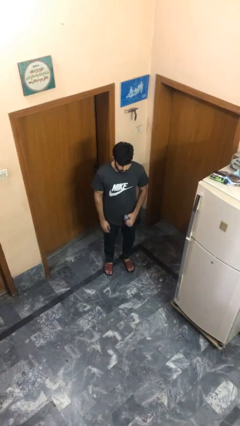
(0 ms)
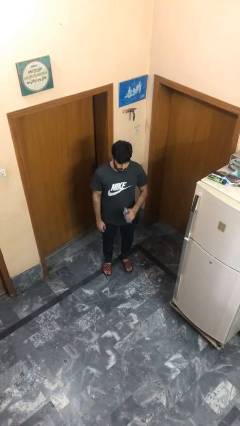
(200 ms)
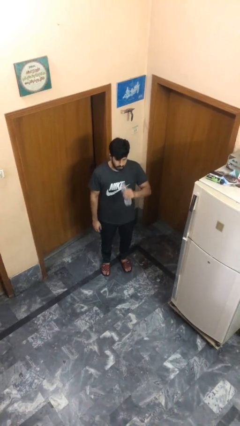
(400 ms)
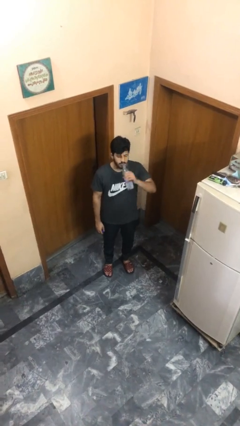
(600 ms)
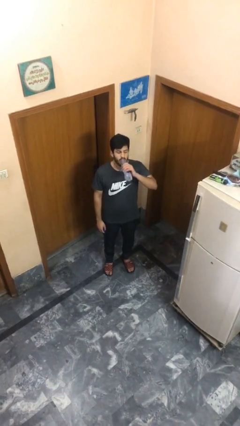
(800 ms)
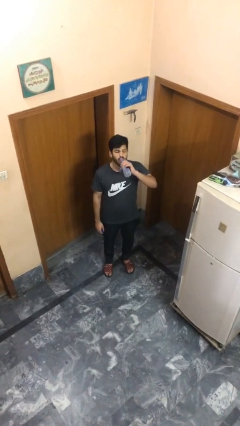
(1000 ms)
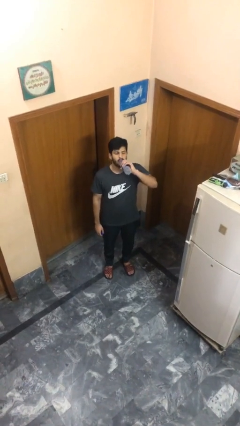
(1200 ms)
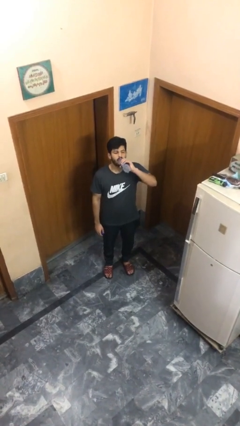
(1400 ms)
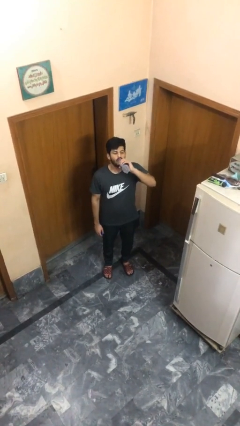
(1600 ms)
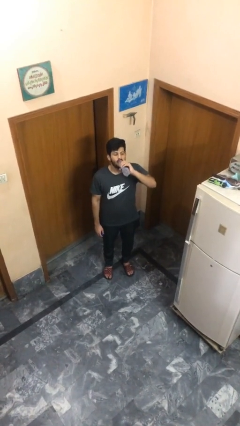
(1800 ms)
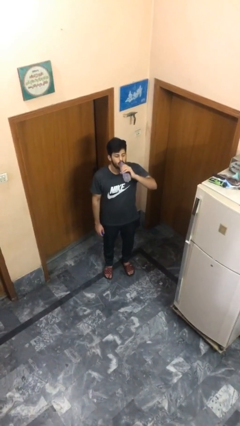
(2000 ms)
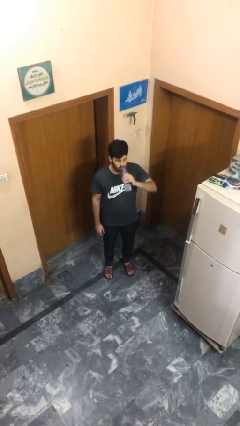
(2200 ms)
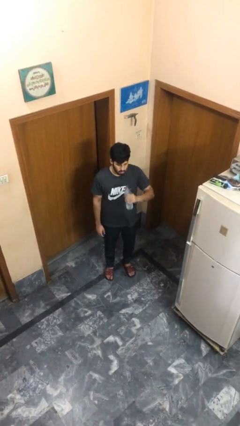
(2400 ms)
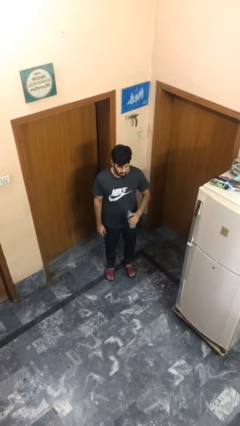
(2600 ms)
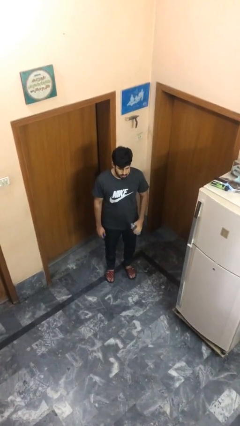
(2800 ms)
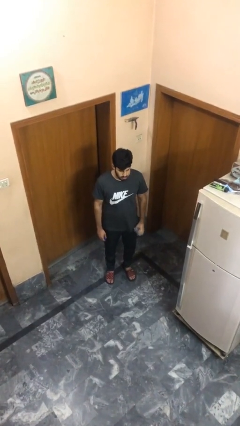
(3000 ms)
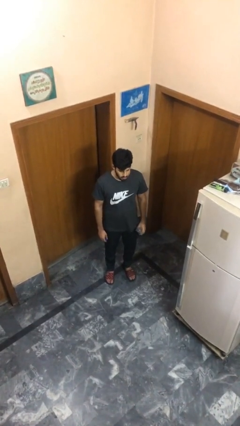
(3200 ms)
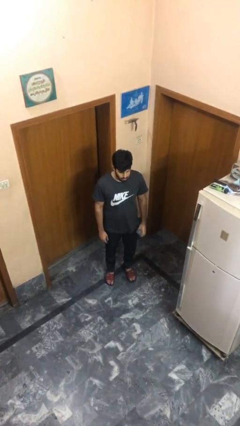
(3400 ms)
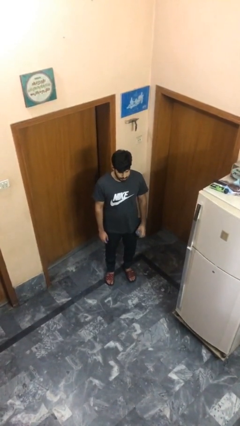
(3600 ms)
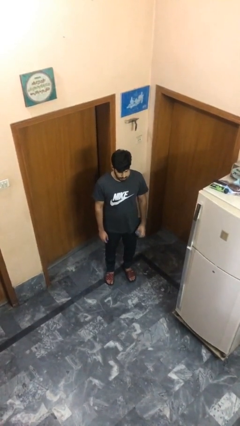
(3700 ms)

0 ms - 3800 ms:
person drinks from bottle

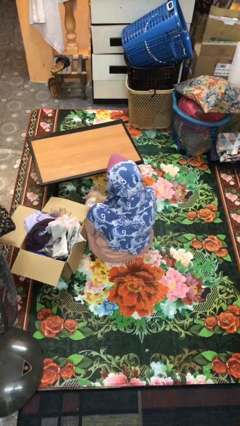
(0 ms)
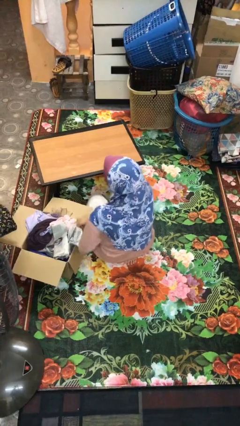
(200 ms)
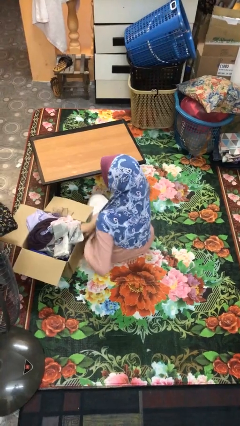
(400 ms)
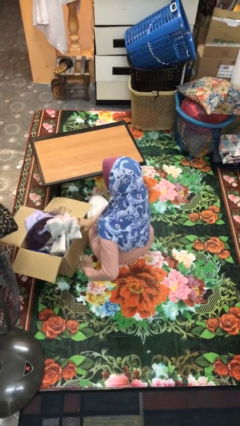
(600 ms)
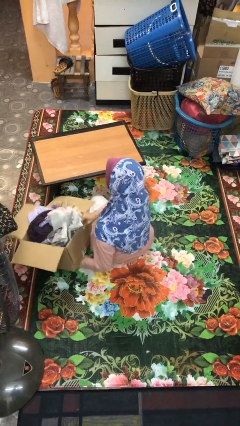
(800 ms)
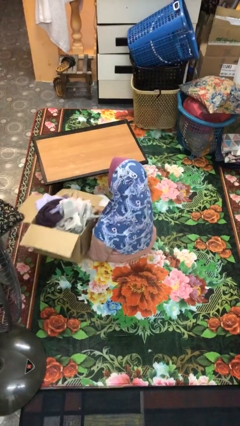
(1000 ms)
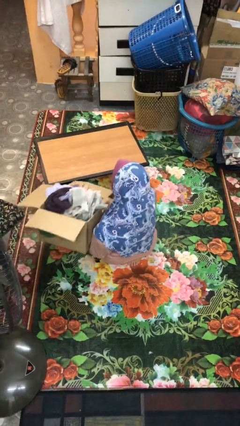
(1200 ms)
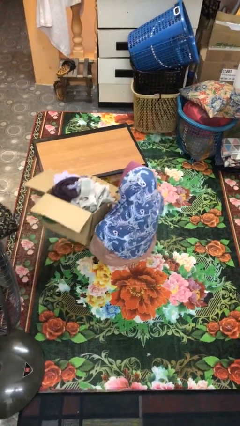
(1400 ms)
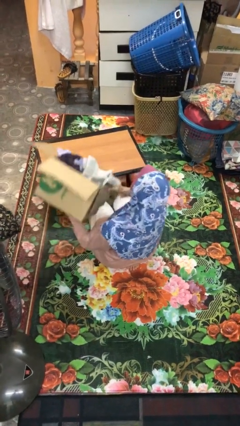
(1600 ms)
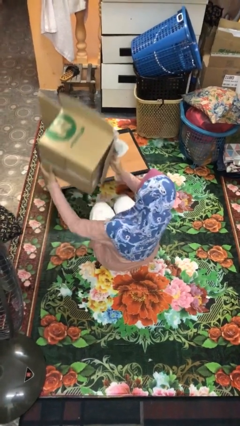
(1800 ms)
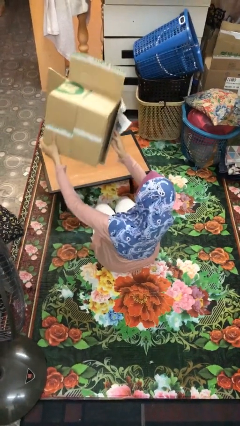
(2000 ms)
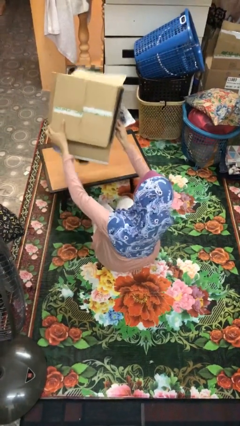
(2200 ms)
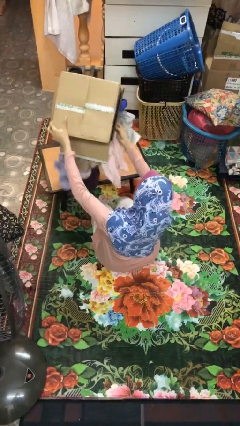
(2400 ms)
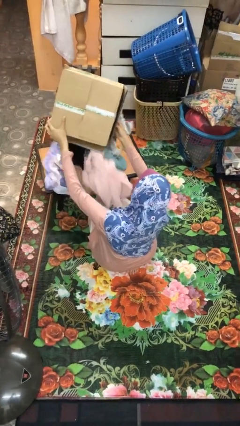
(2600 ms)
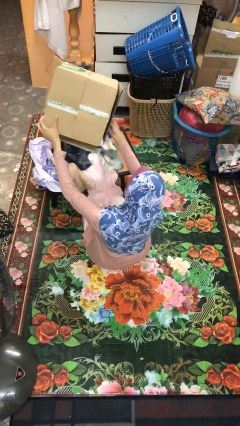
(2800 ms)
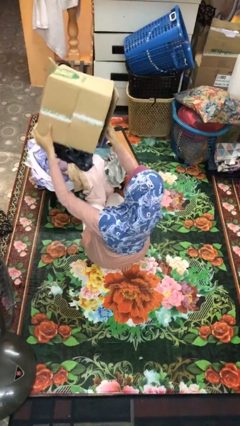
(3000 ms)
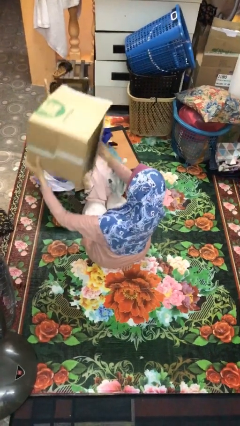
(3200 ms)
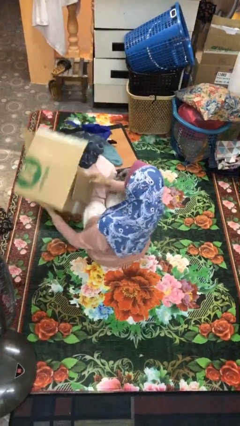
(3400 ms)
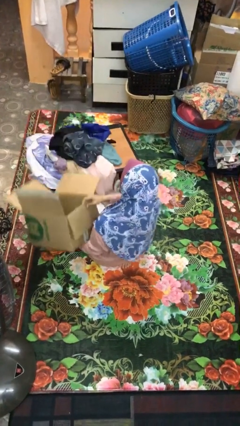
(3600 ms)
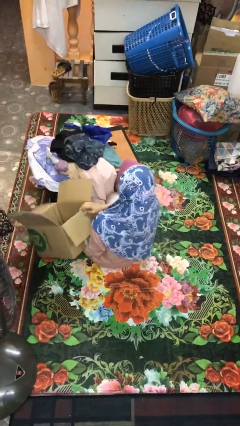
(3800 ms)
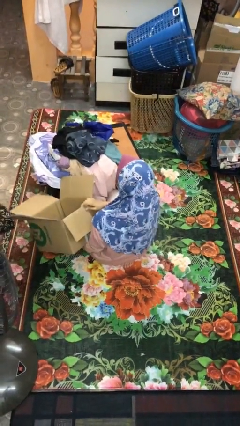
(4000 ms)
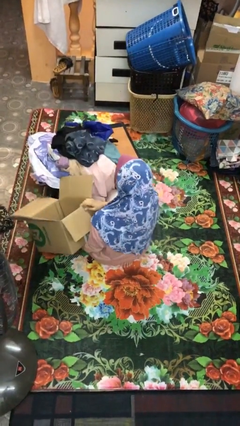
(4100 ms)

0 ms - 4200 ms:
person unloads box onto table

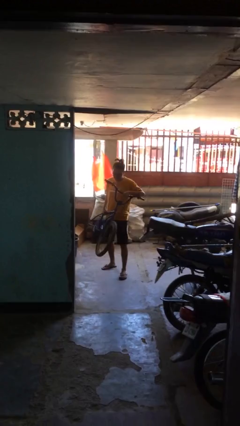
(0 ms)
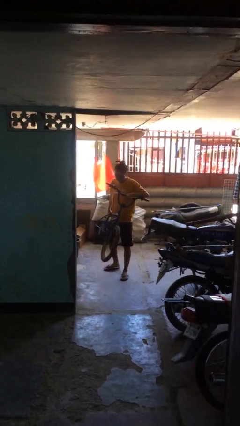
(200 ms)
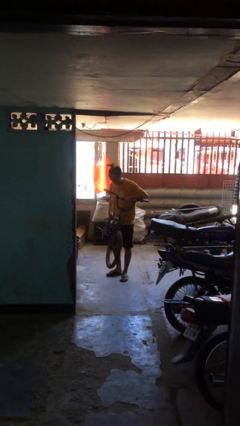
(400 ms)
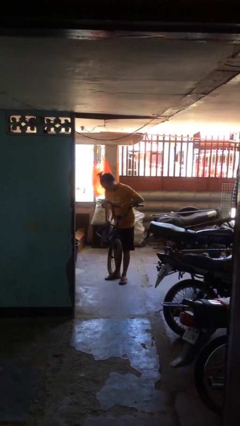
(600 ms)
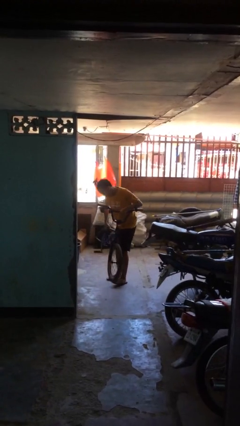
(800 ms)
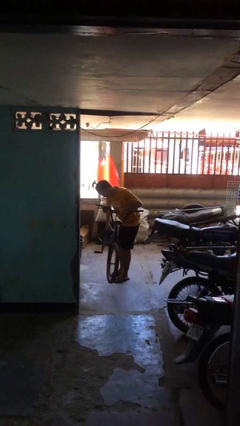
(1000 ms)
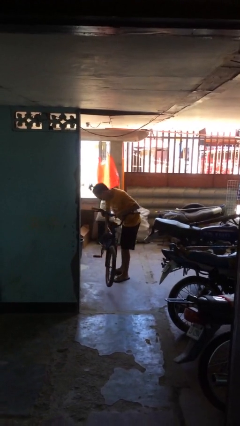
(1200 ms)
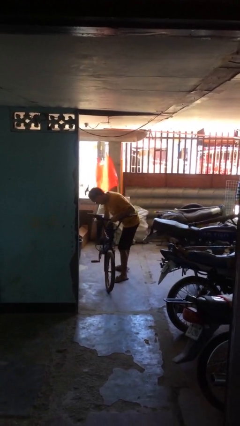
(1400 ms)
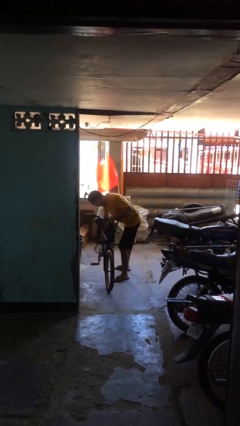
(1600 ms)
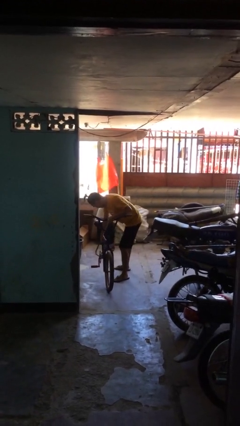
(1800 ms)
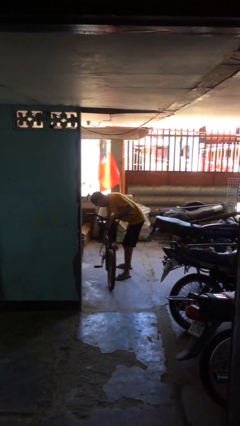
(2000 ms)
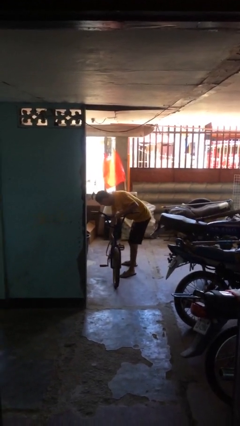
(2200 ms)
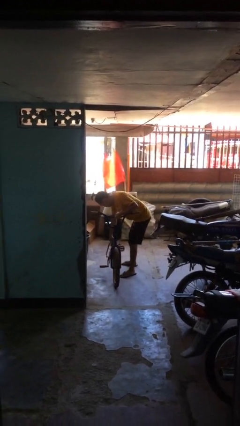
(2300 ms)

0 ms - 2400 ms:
person puts down object on floor

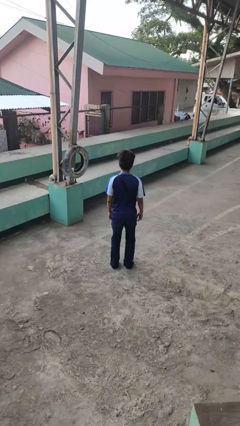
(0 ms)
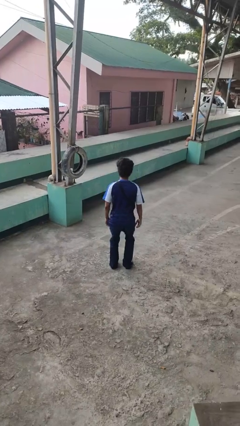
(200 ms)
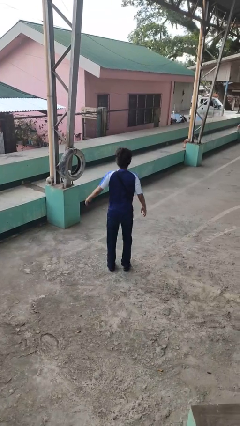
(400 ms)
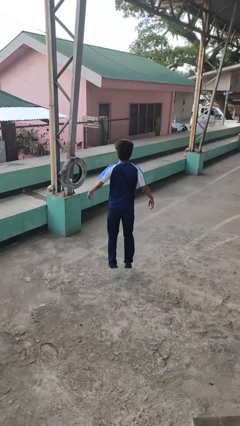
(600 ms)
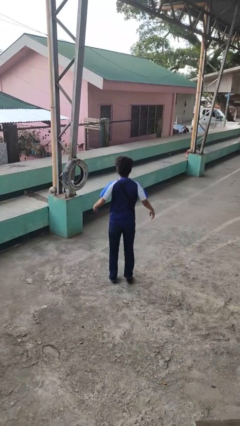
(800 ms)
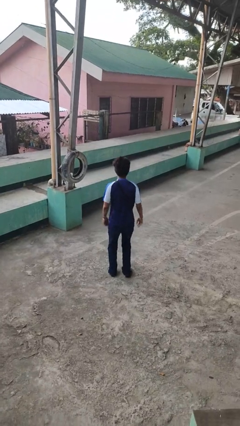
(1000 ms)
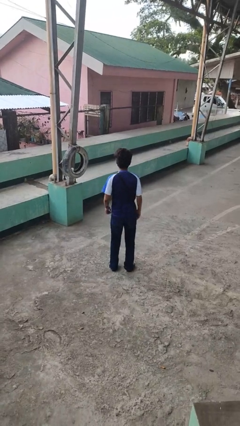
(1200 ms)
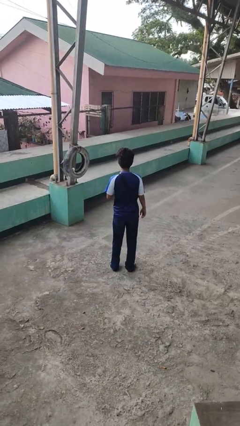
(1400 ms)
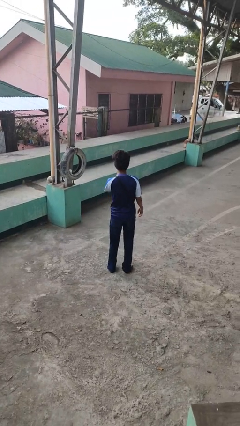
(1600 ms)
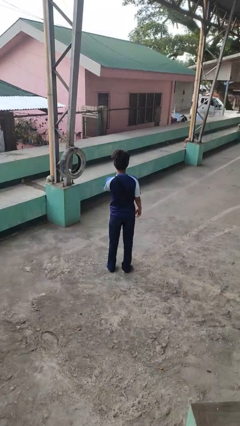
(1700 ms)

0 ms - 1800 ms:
person jumps

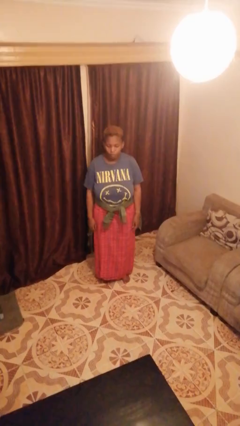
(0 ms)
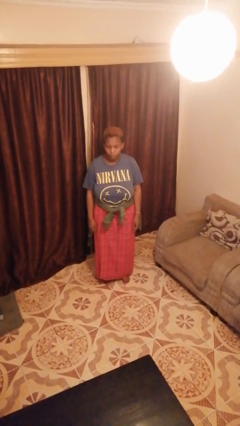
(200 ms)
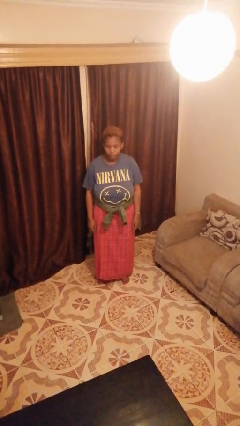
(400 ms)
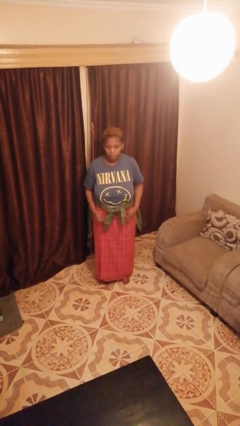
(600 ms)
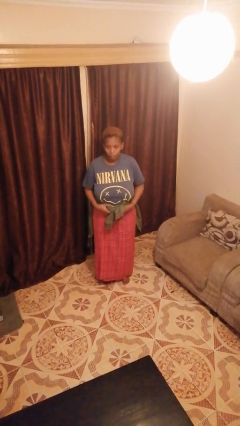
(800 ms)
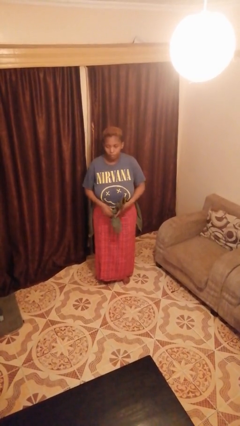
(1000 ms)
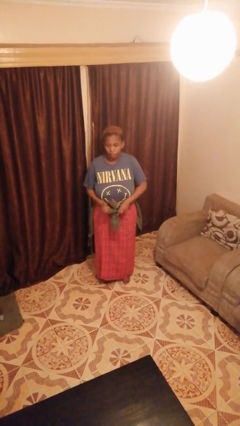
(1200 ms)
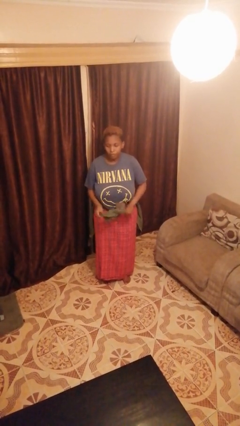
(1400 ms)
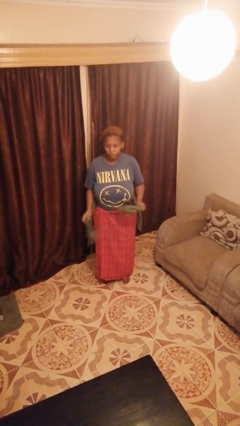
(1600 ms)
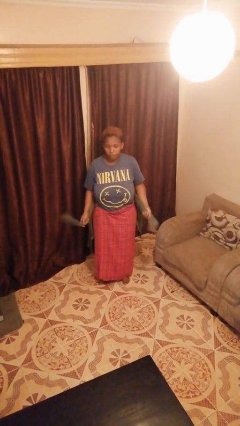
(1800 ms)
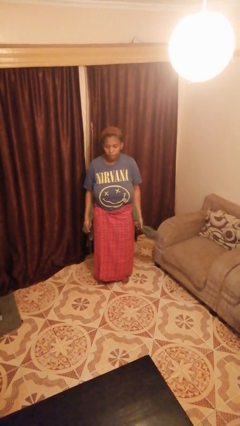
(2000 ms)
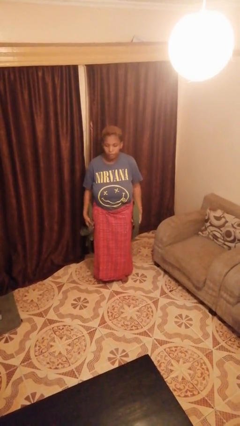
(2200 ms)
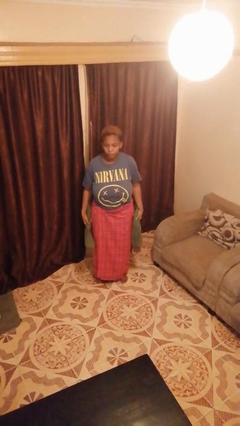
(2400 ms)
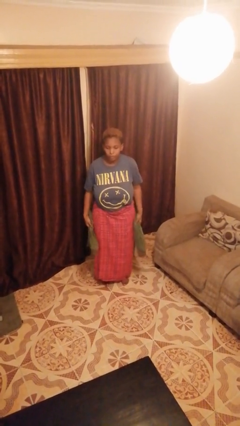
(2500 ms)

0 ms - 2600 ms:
person unties jacket around waist

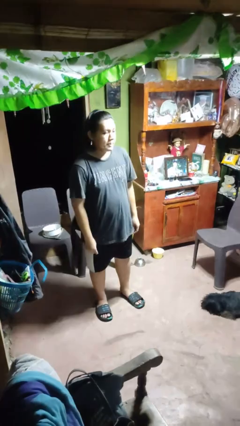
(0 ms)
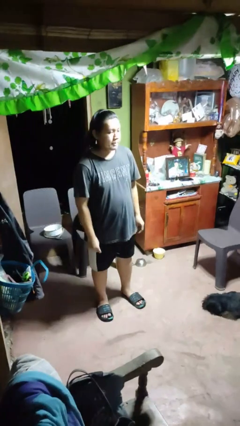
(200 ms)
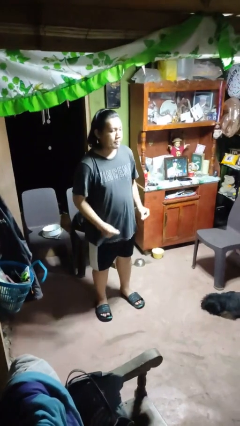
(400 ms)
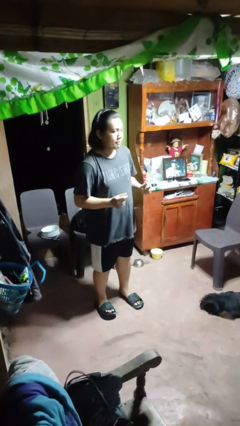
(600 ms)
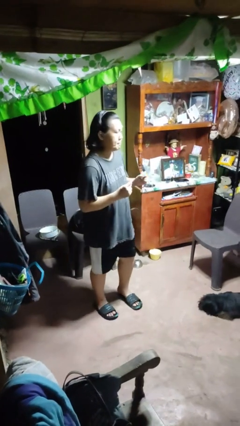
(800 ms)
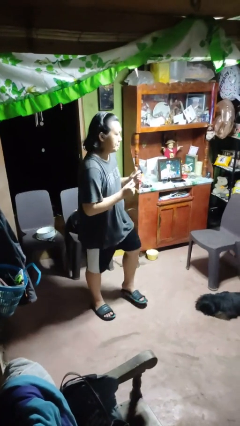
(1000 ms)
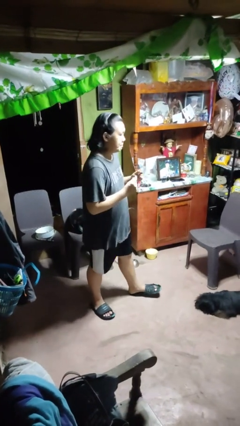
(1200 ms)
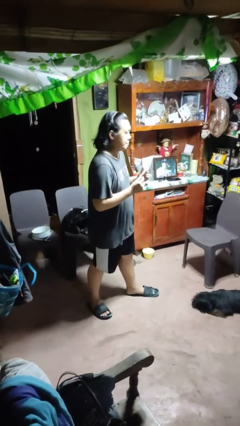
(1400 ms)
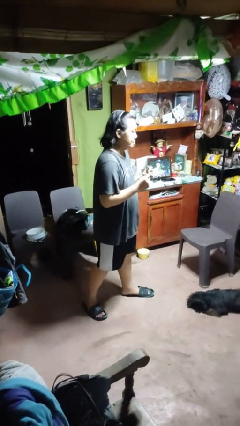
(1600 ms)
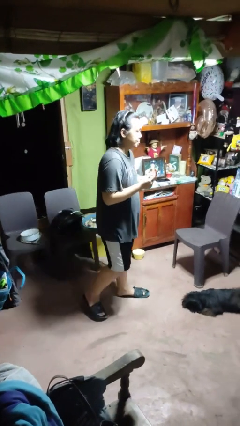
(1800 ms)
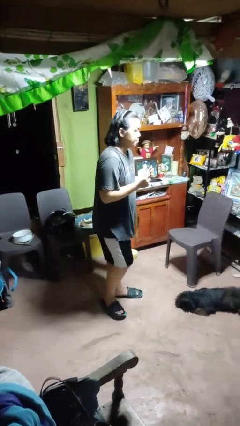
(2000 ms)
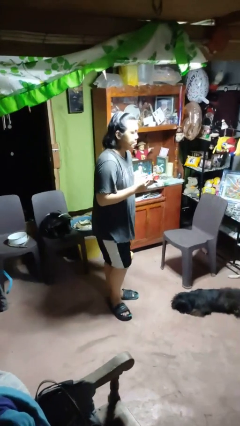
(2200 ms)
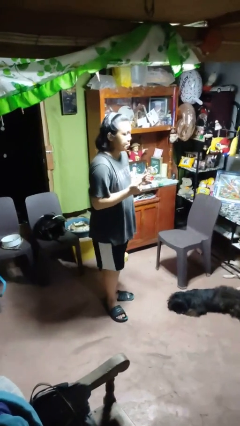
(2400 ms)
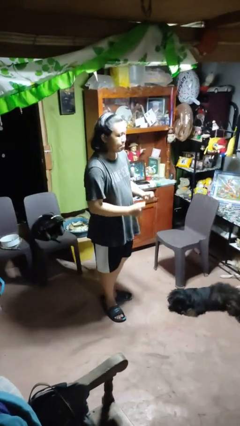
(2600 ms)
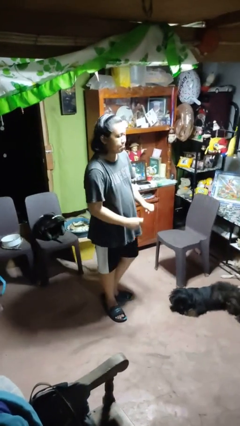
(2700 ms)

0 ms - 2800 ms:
person snaps fingers
